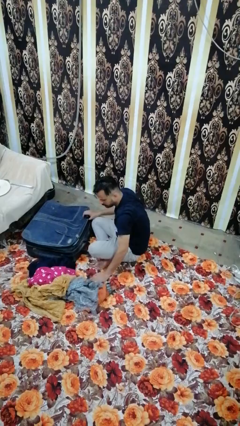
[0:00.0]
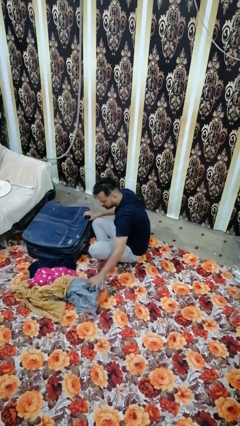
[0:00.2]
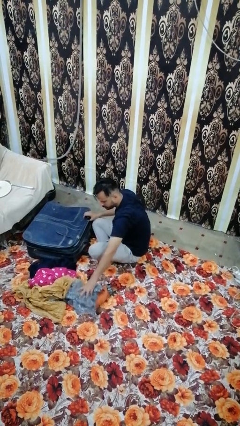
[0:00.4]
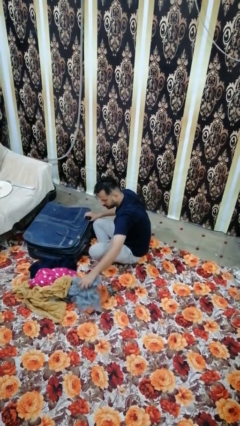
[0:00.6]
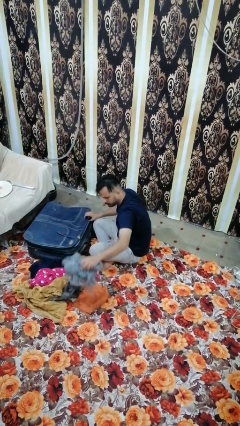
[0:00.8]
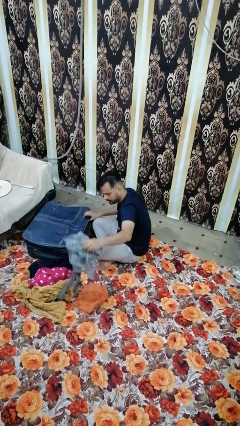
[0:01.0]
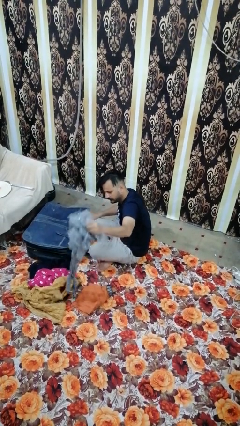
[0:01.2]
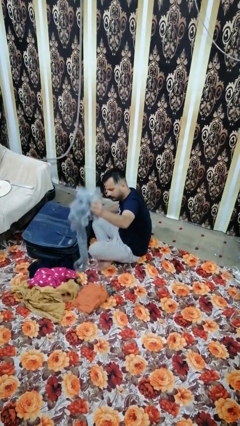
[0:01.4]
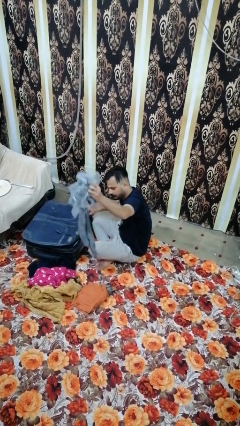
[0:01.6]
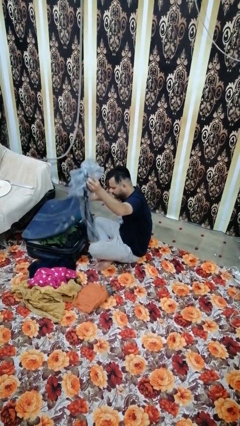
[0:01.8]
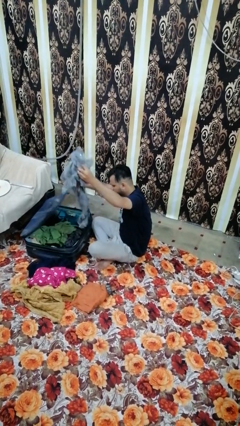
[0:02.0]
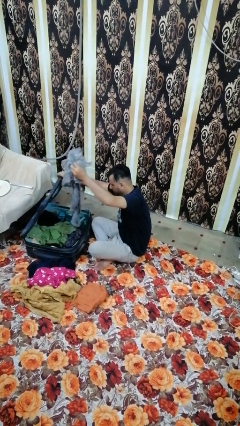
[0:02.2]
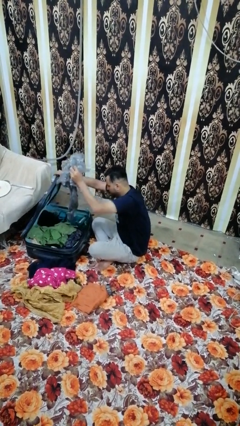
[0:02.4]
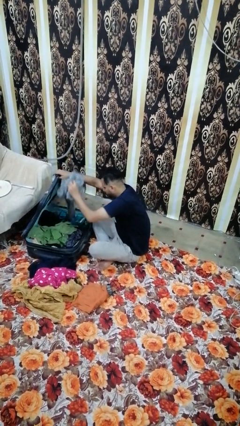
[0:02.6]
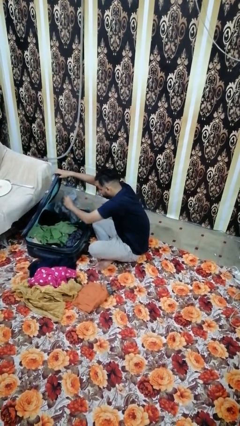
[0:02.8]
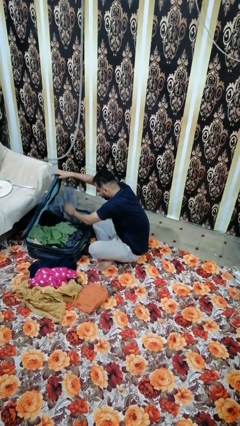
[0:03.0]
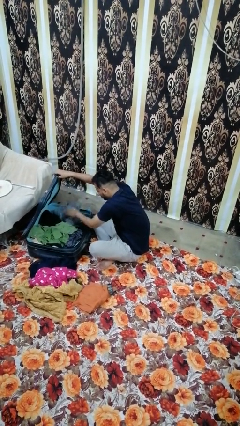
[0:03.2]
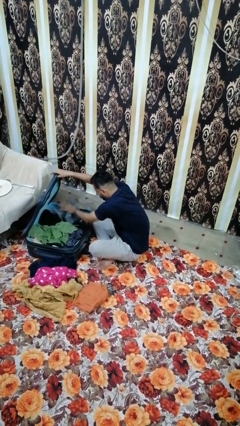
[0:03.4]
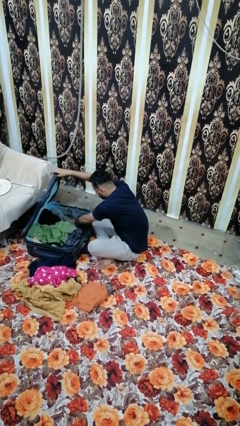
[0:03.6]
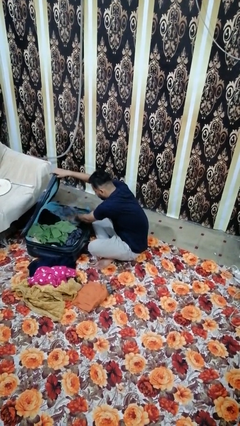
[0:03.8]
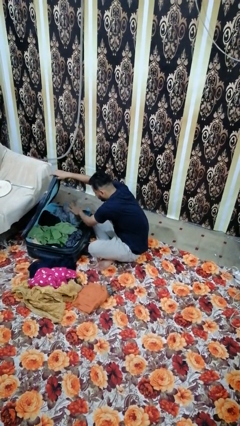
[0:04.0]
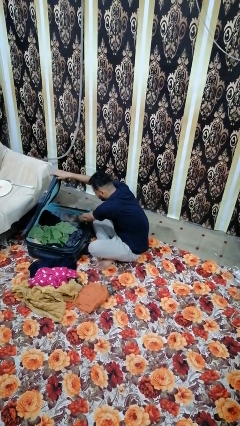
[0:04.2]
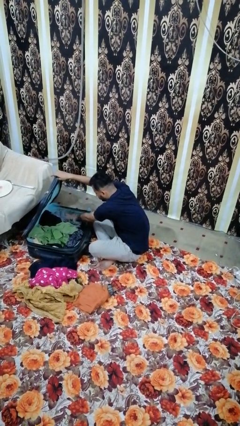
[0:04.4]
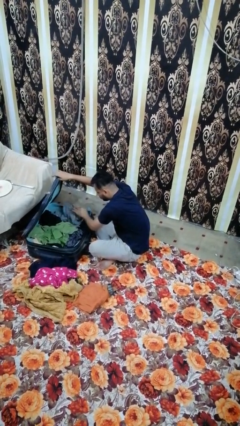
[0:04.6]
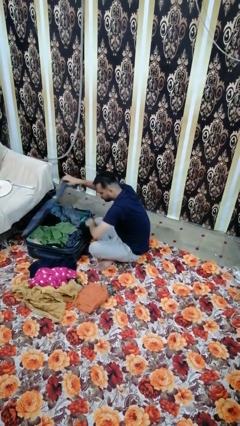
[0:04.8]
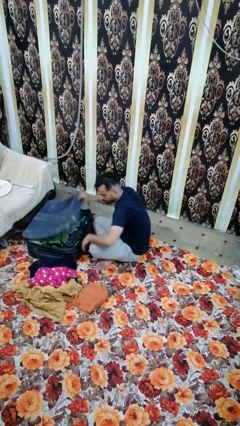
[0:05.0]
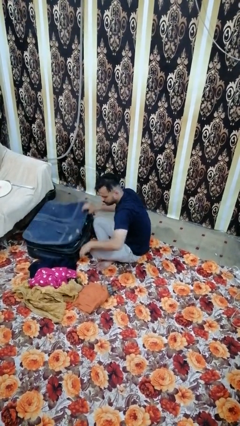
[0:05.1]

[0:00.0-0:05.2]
person loads clothes into suitcase

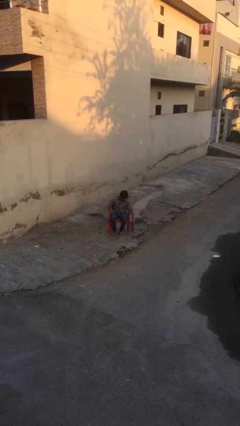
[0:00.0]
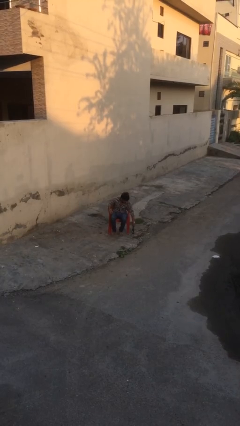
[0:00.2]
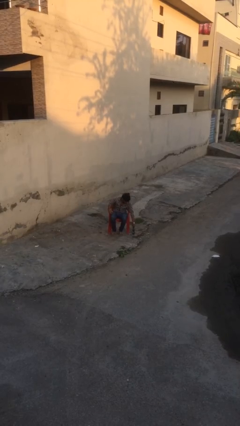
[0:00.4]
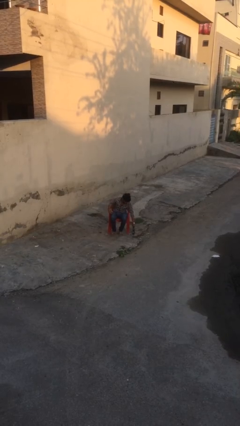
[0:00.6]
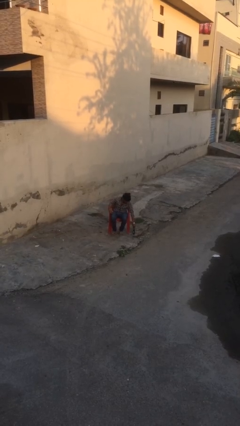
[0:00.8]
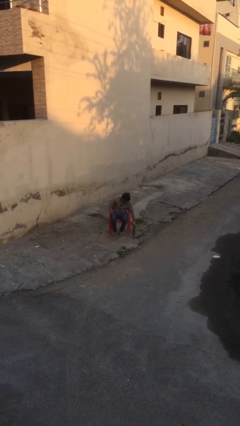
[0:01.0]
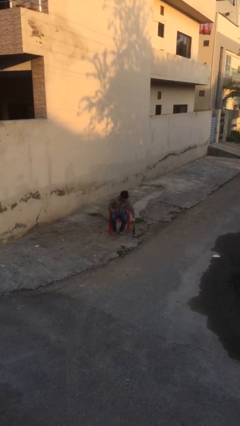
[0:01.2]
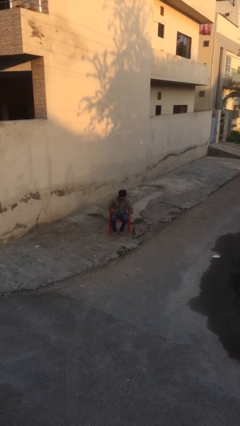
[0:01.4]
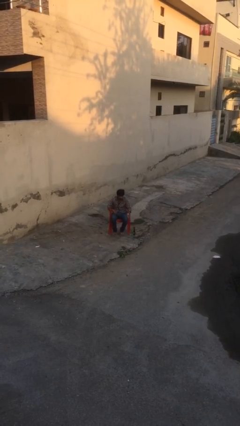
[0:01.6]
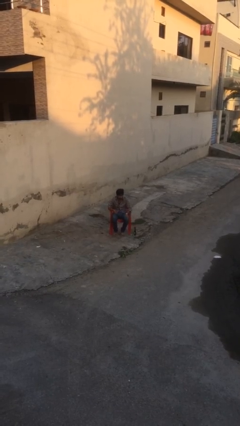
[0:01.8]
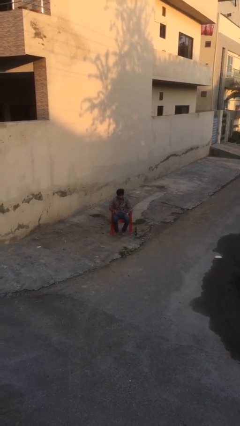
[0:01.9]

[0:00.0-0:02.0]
person puts down object on floor

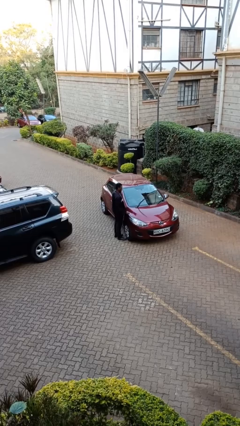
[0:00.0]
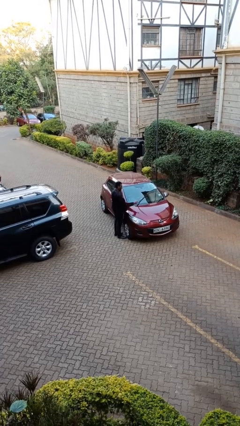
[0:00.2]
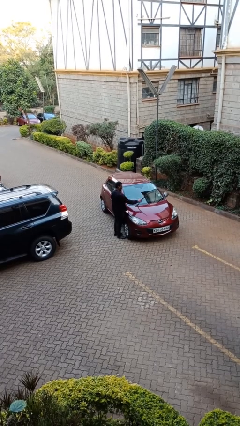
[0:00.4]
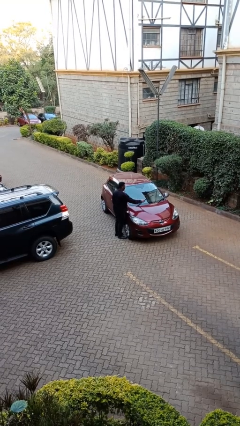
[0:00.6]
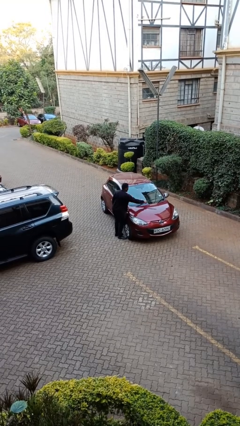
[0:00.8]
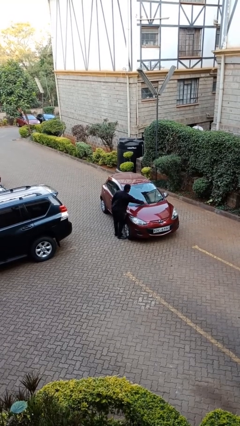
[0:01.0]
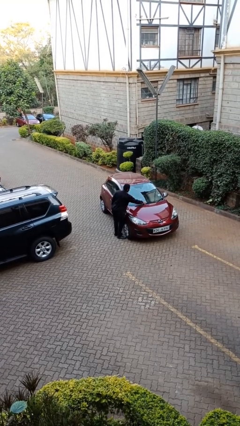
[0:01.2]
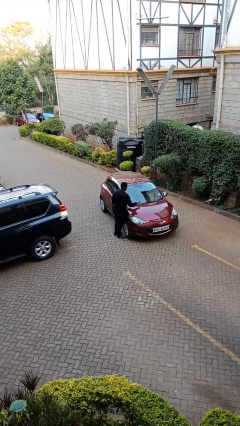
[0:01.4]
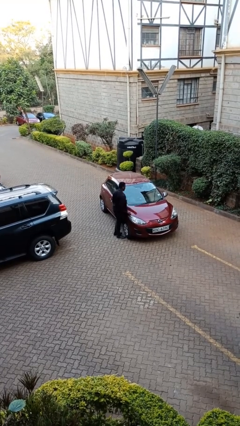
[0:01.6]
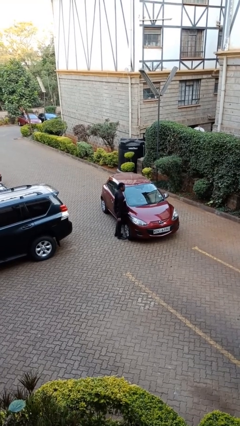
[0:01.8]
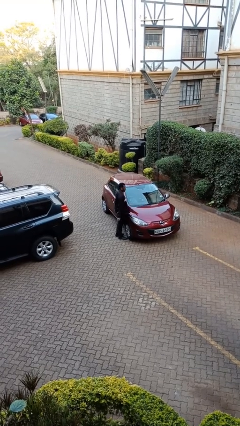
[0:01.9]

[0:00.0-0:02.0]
person flips down car wipers

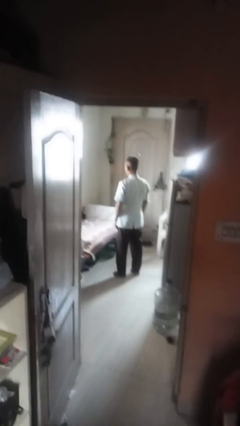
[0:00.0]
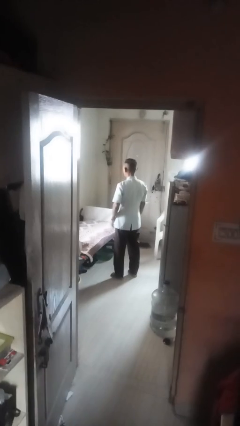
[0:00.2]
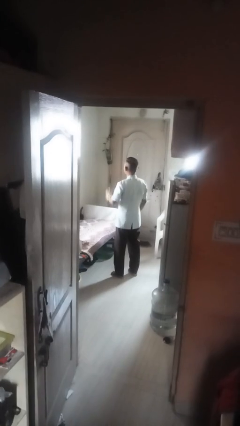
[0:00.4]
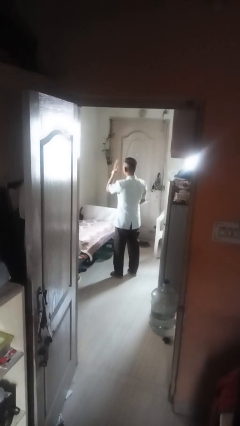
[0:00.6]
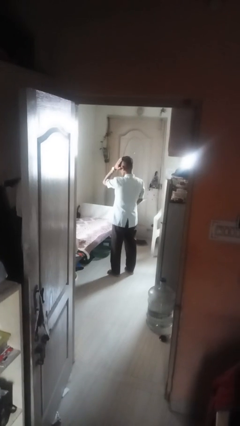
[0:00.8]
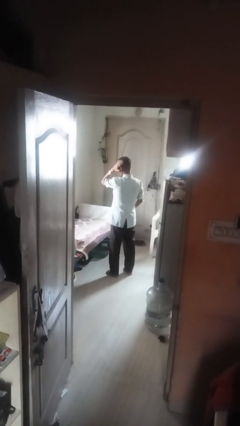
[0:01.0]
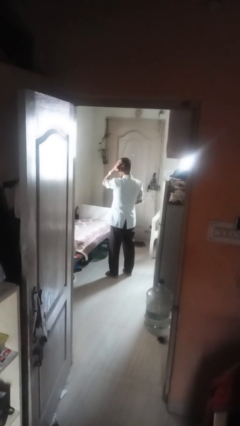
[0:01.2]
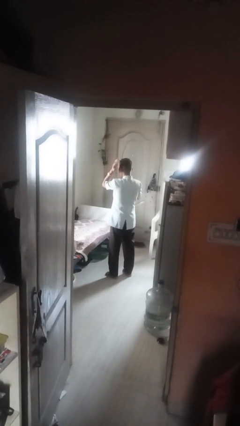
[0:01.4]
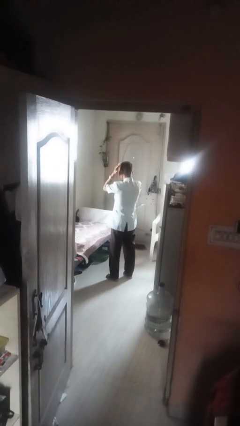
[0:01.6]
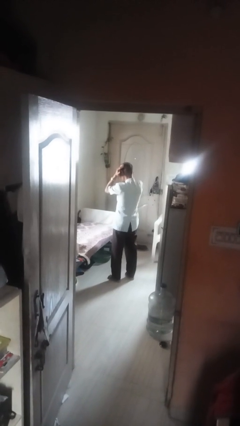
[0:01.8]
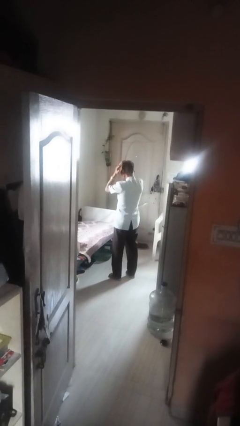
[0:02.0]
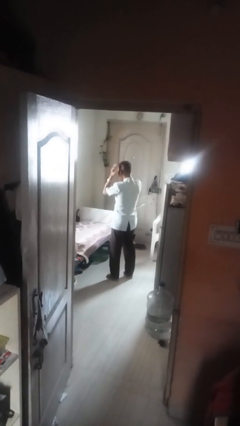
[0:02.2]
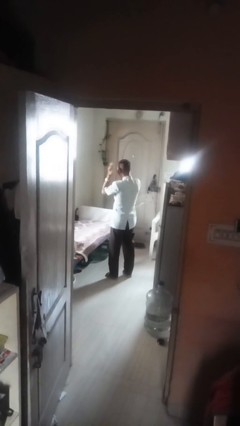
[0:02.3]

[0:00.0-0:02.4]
person strokes hair

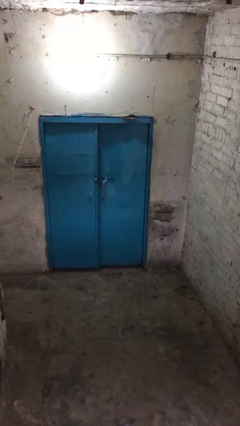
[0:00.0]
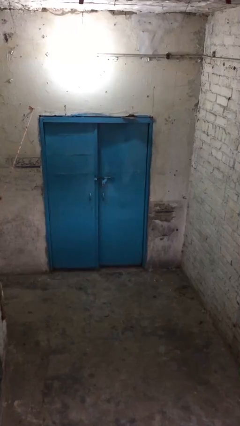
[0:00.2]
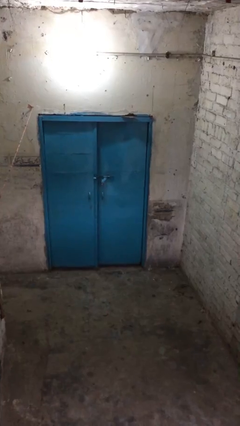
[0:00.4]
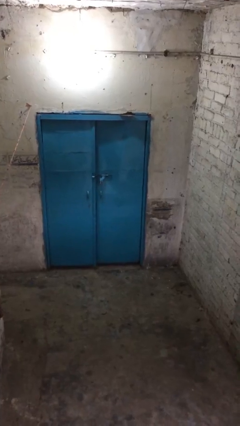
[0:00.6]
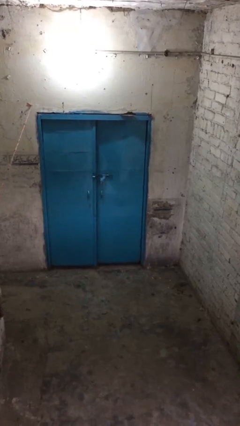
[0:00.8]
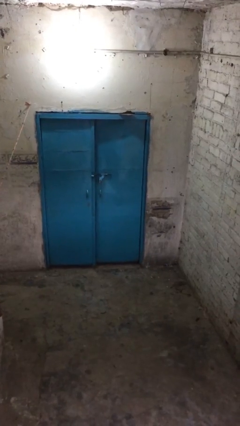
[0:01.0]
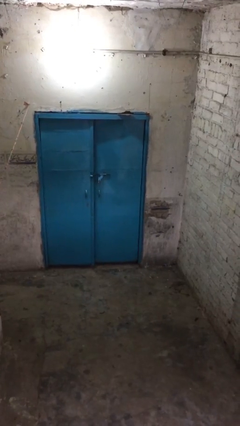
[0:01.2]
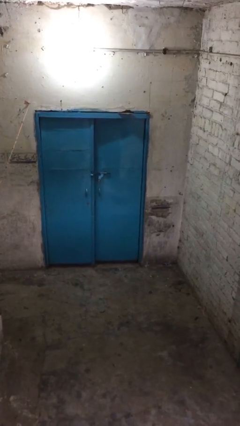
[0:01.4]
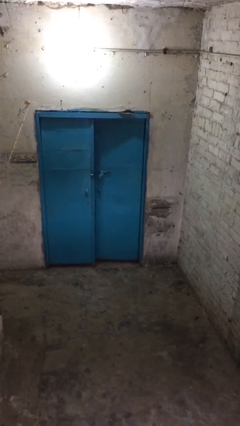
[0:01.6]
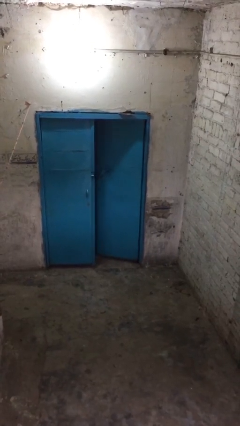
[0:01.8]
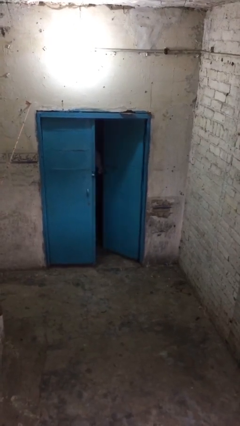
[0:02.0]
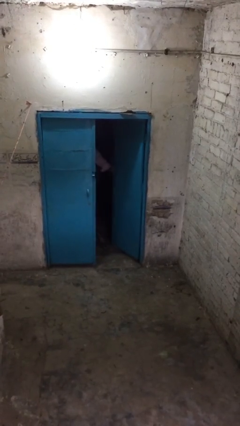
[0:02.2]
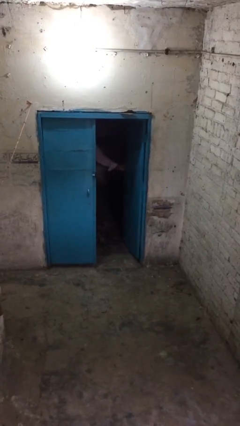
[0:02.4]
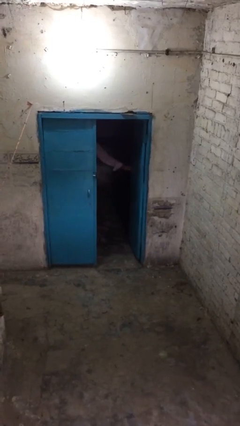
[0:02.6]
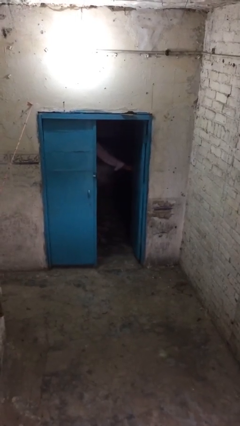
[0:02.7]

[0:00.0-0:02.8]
person opens facility door

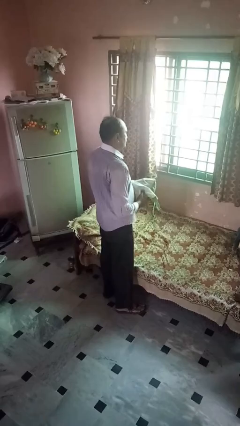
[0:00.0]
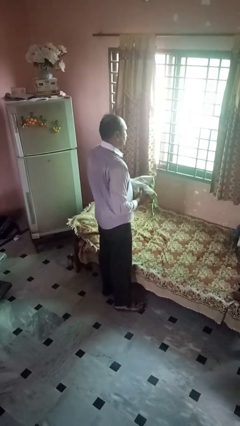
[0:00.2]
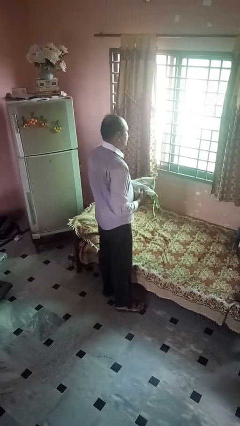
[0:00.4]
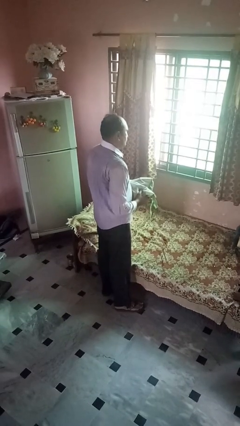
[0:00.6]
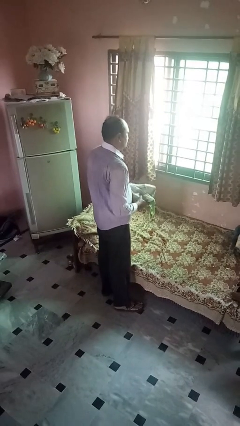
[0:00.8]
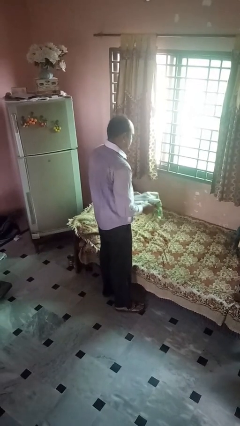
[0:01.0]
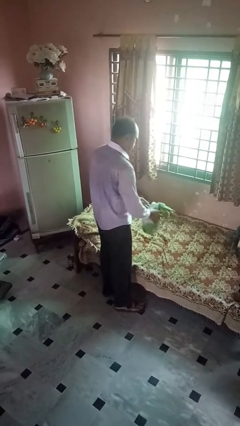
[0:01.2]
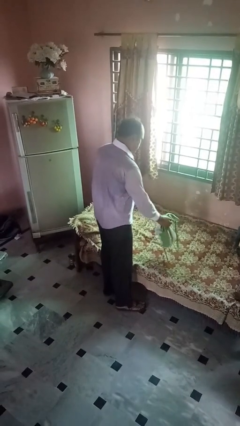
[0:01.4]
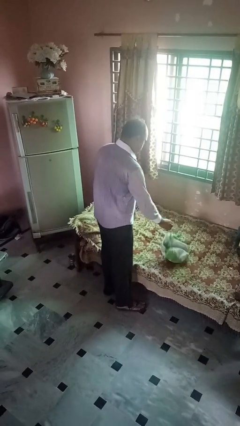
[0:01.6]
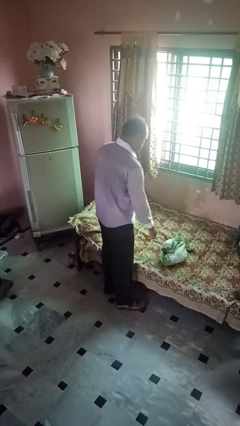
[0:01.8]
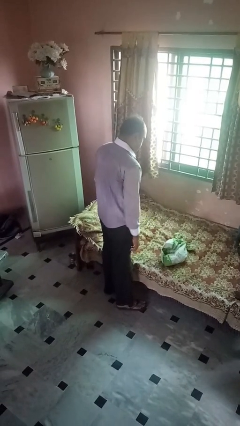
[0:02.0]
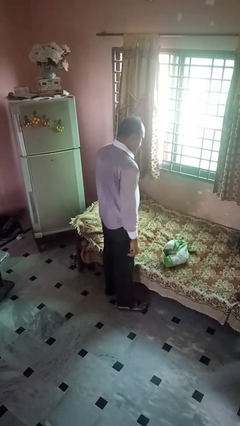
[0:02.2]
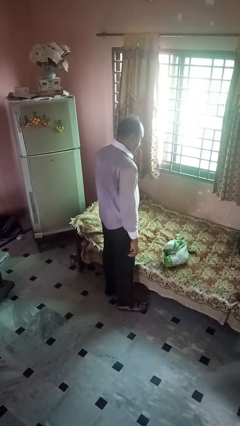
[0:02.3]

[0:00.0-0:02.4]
person puts down object on bed

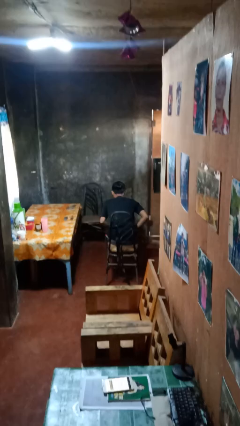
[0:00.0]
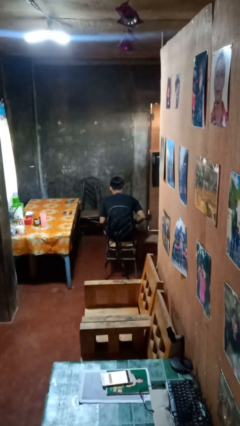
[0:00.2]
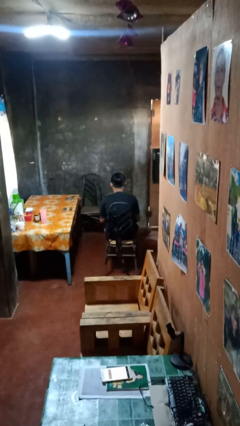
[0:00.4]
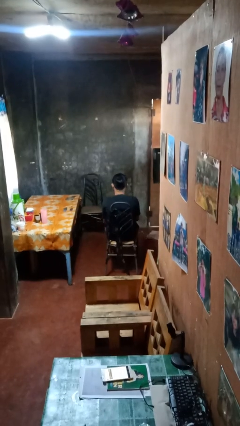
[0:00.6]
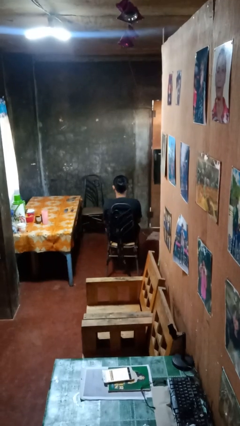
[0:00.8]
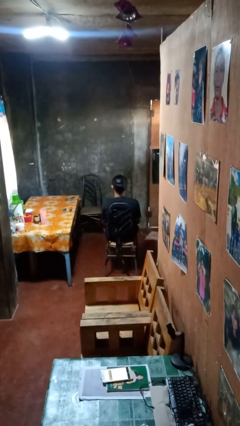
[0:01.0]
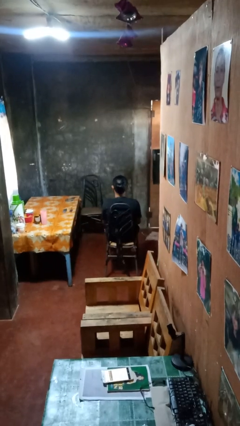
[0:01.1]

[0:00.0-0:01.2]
person sits down
